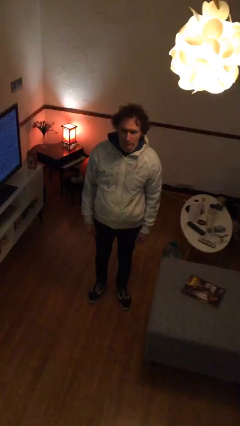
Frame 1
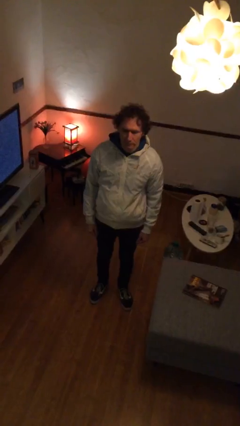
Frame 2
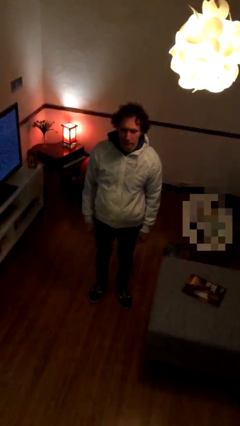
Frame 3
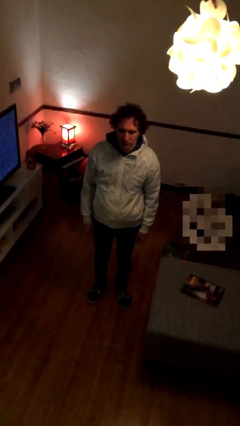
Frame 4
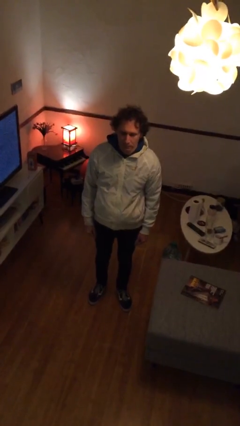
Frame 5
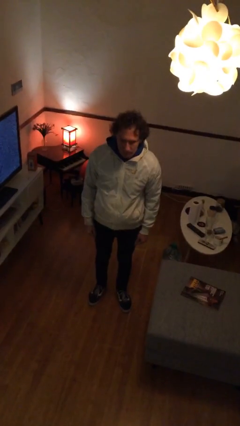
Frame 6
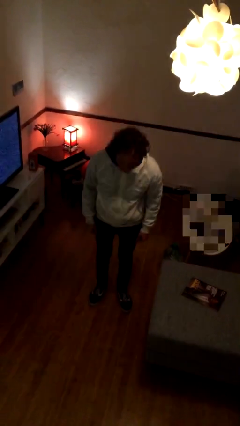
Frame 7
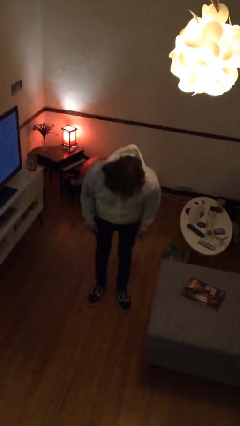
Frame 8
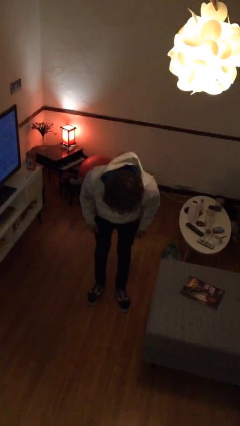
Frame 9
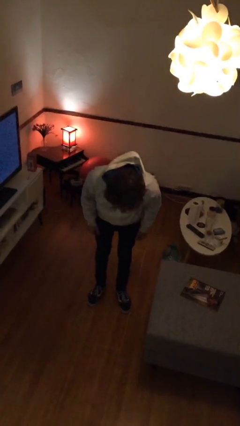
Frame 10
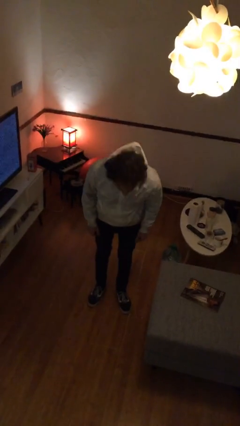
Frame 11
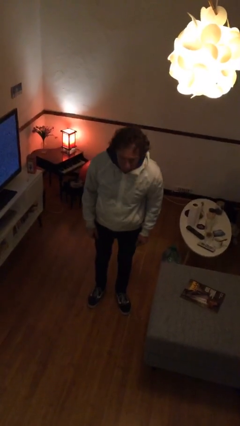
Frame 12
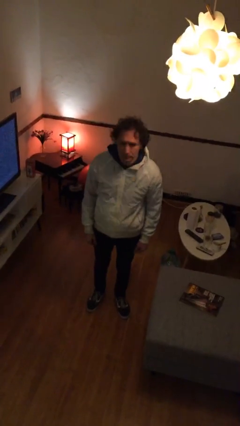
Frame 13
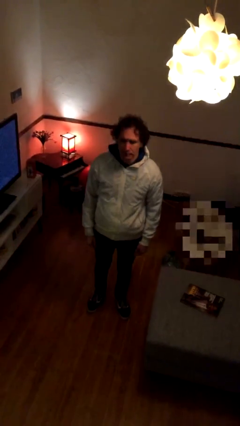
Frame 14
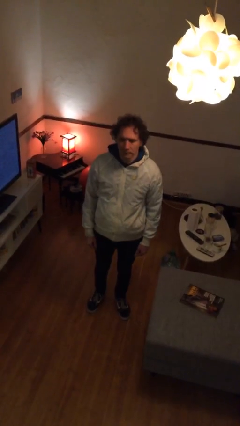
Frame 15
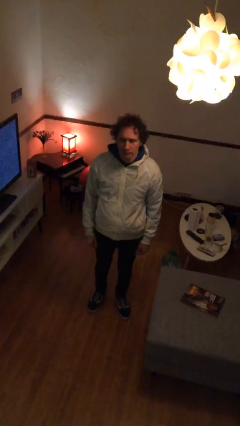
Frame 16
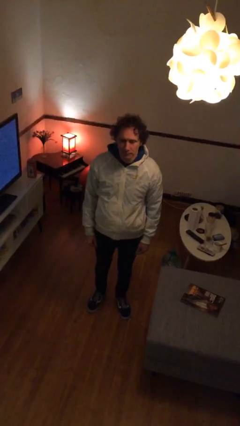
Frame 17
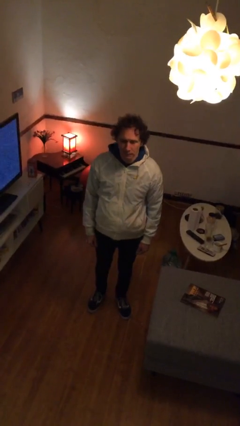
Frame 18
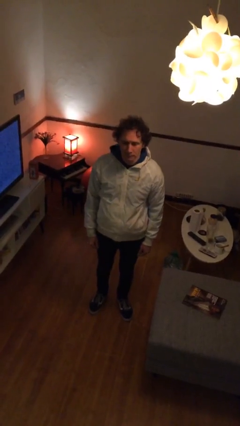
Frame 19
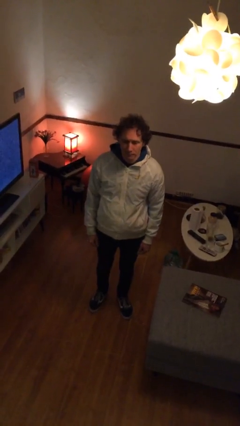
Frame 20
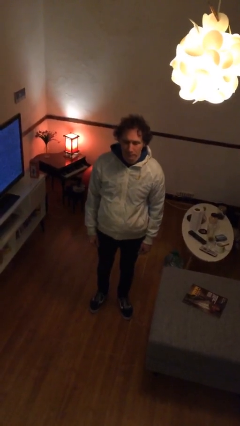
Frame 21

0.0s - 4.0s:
person bows

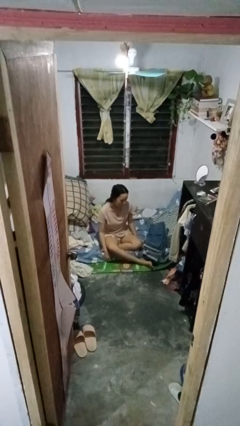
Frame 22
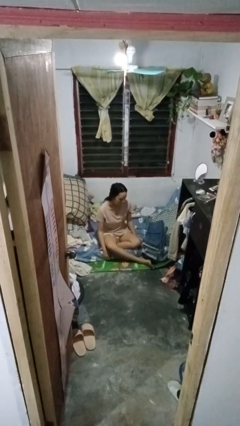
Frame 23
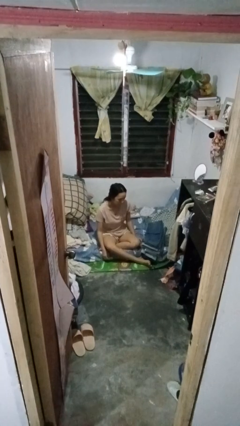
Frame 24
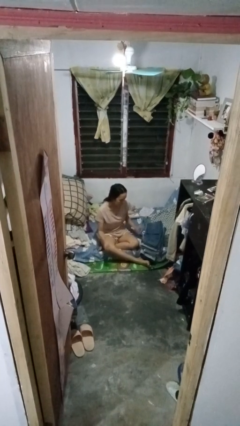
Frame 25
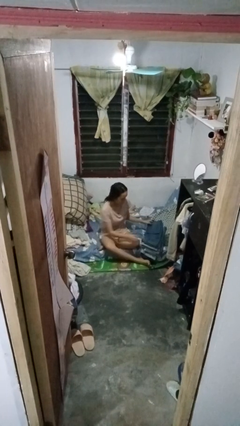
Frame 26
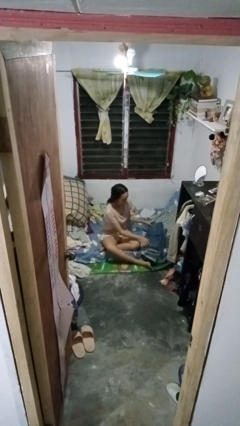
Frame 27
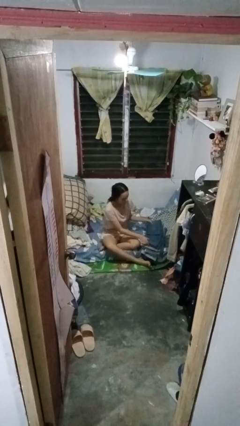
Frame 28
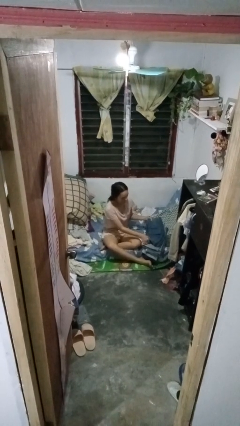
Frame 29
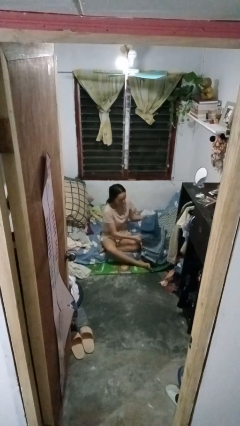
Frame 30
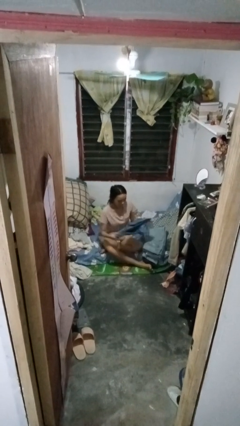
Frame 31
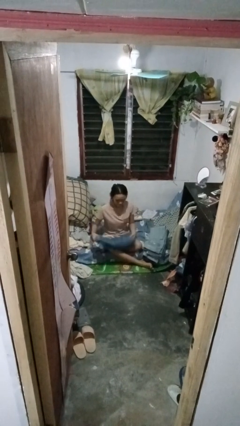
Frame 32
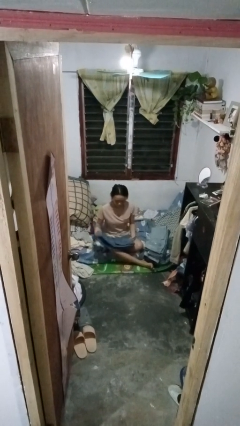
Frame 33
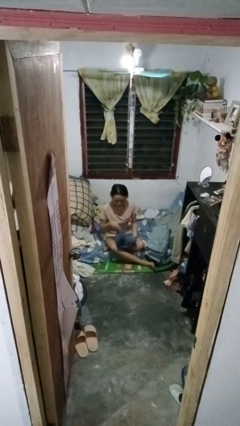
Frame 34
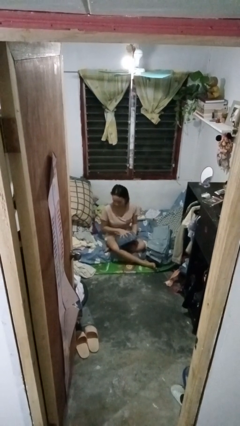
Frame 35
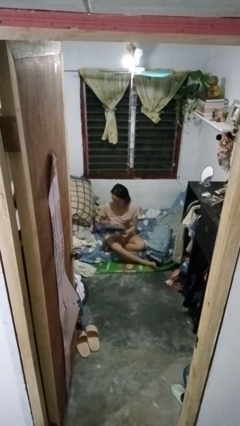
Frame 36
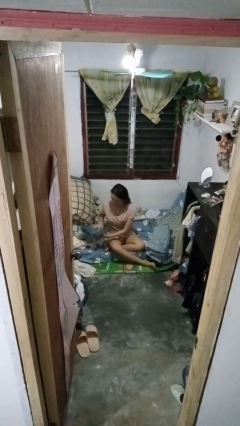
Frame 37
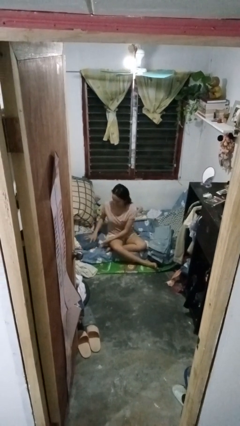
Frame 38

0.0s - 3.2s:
person folds pants

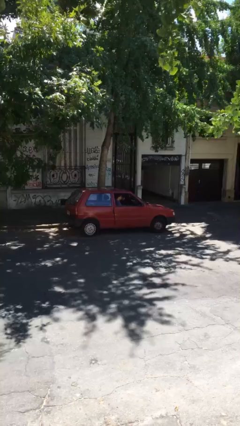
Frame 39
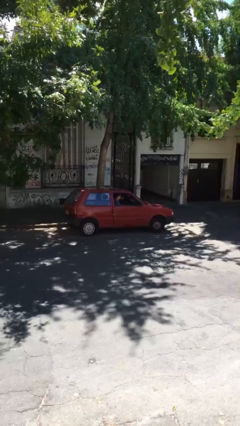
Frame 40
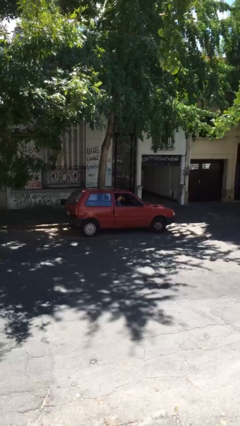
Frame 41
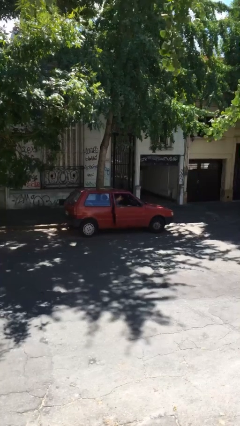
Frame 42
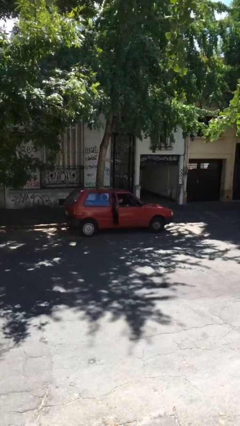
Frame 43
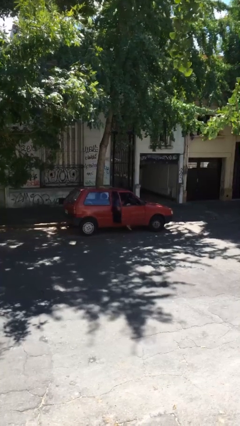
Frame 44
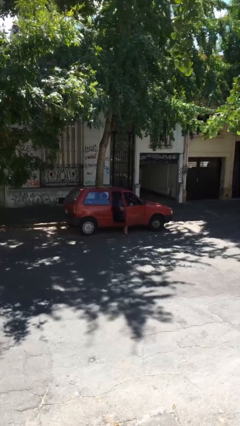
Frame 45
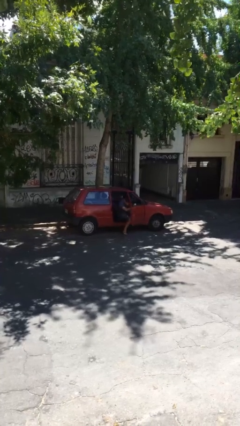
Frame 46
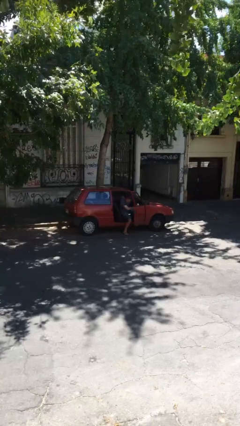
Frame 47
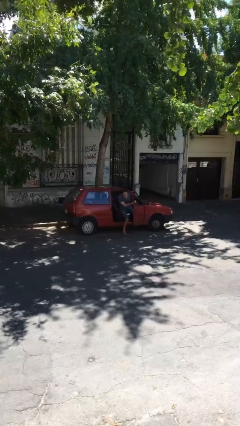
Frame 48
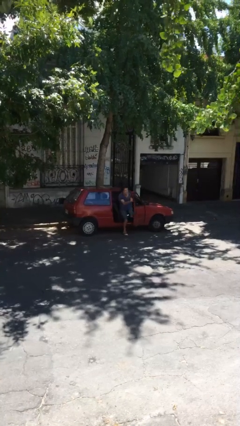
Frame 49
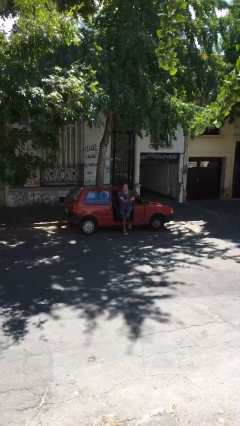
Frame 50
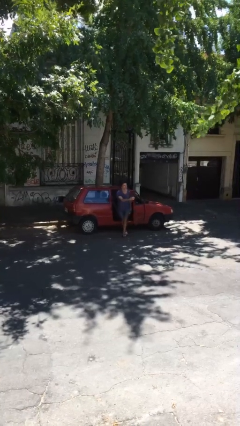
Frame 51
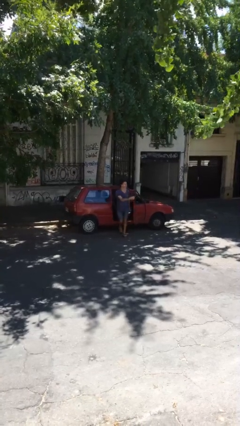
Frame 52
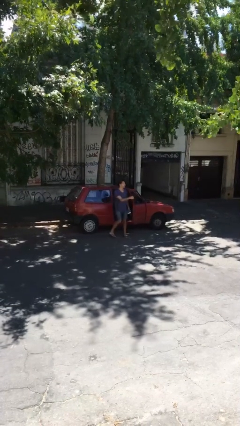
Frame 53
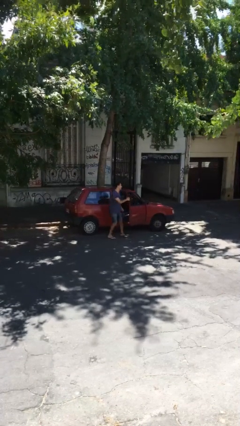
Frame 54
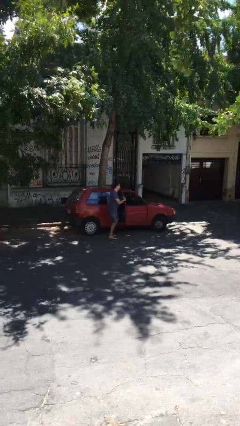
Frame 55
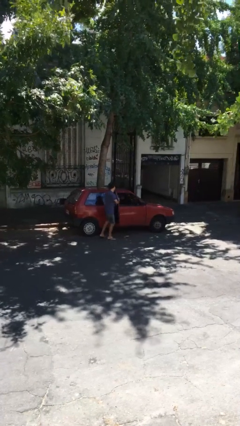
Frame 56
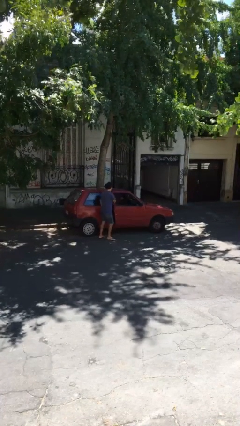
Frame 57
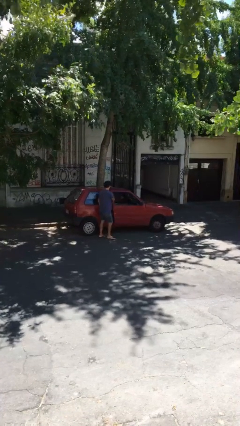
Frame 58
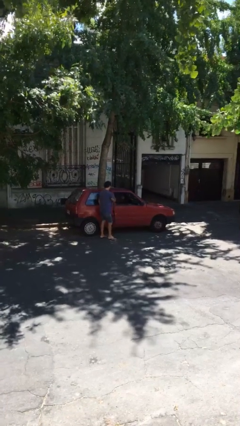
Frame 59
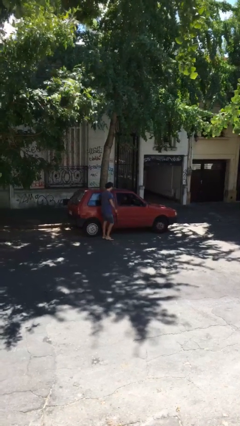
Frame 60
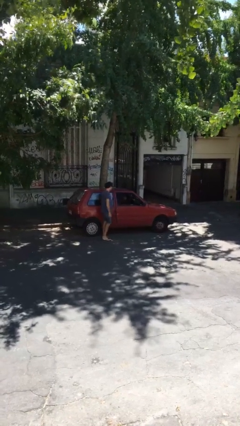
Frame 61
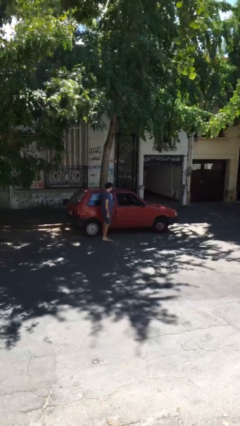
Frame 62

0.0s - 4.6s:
car drops off person

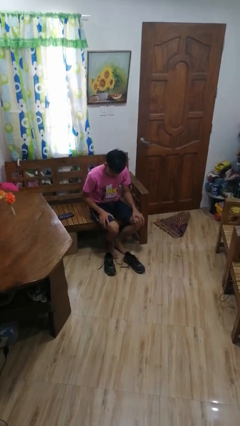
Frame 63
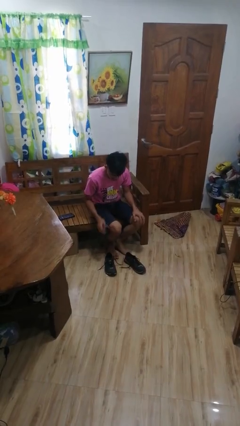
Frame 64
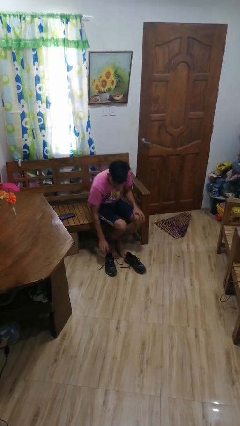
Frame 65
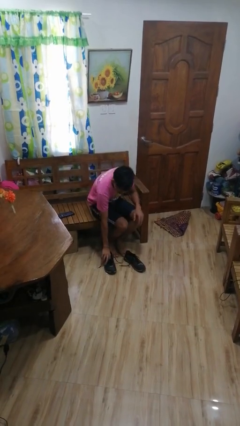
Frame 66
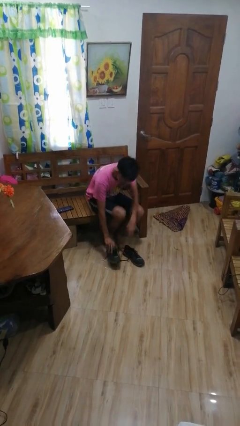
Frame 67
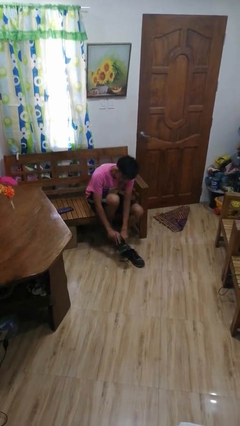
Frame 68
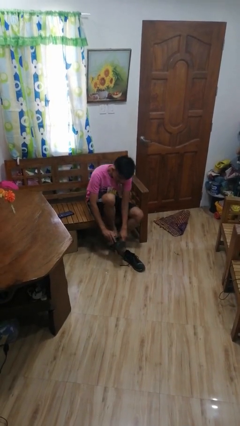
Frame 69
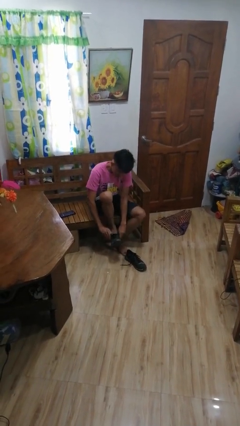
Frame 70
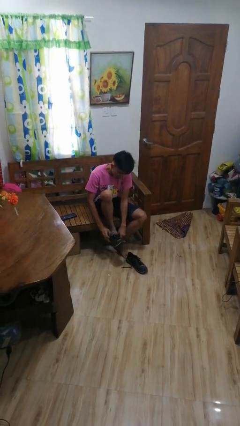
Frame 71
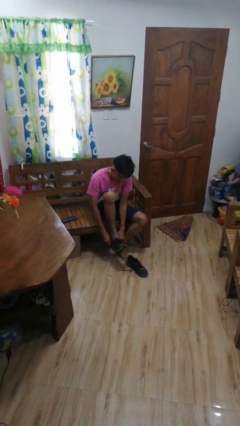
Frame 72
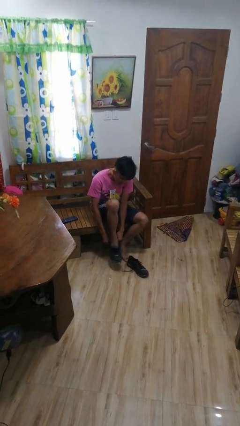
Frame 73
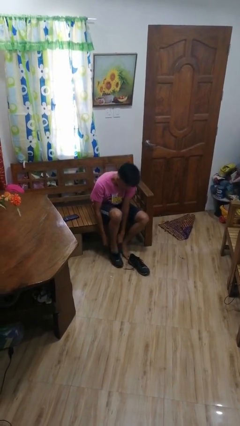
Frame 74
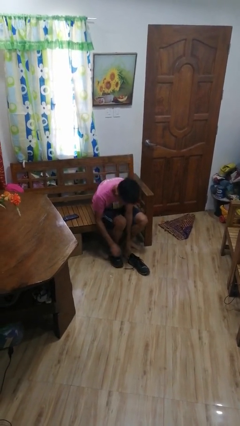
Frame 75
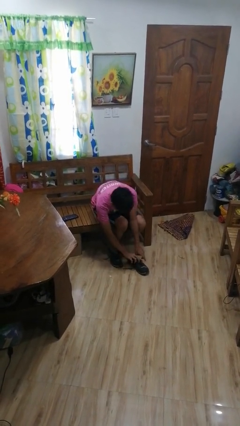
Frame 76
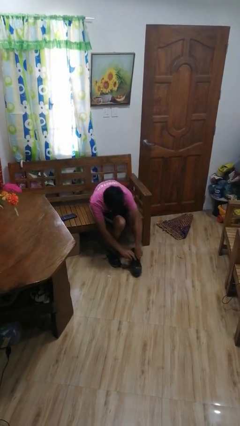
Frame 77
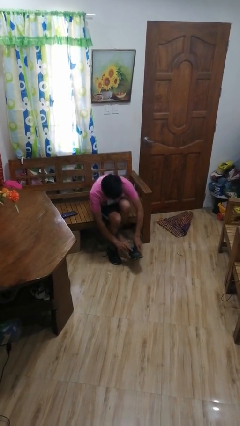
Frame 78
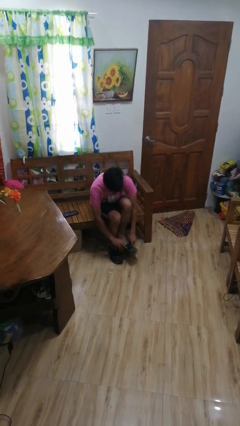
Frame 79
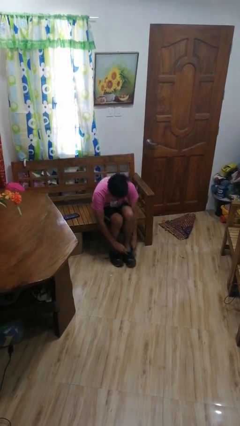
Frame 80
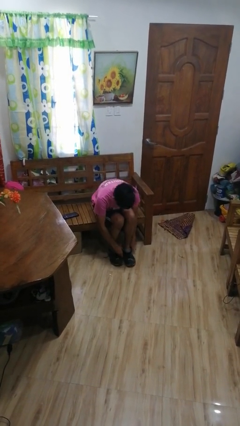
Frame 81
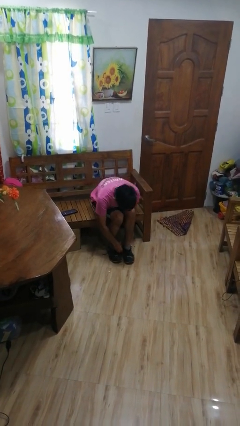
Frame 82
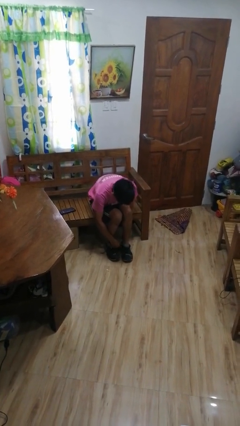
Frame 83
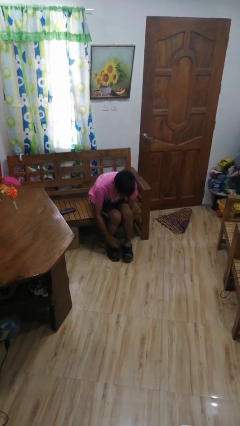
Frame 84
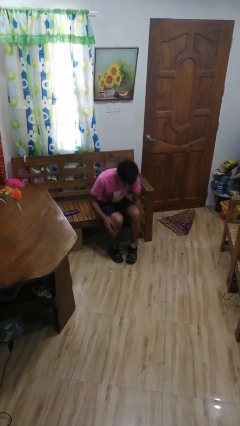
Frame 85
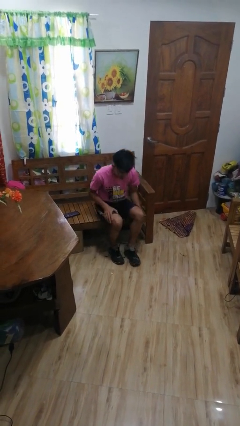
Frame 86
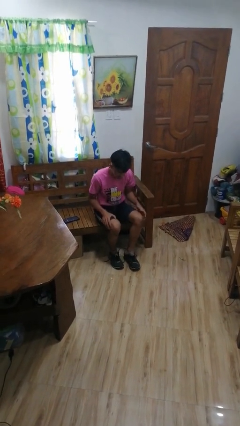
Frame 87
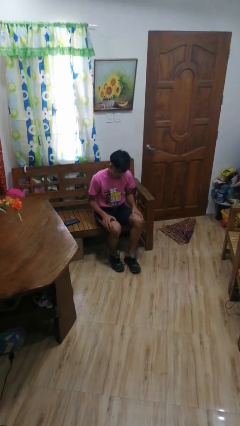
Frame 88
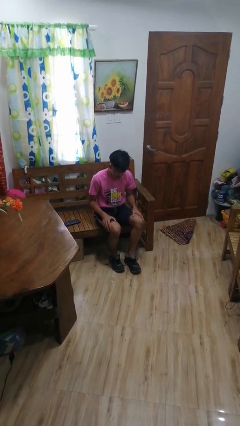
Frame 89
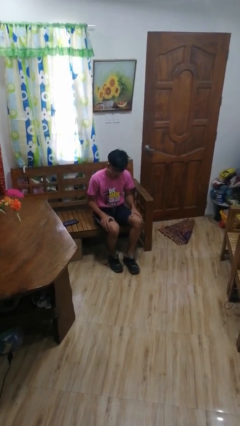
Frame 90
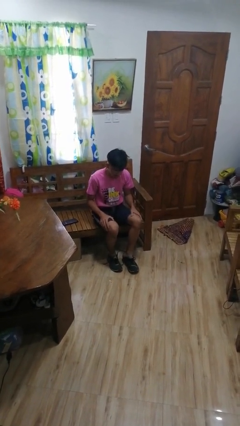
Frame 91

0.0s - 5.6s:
person puts on shoes

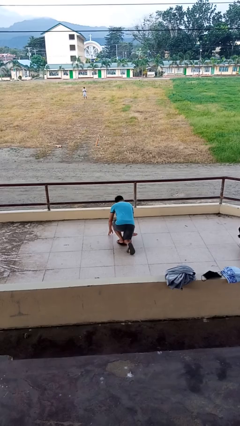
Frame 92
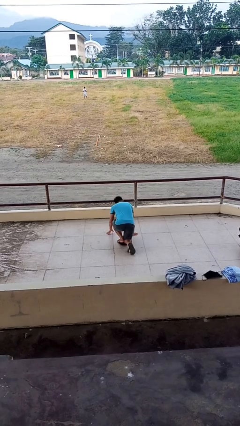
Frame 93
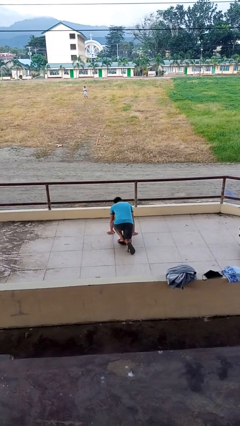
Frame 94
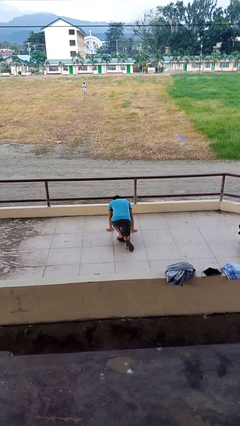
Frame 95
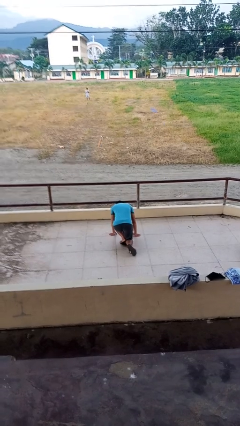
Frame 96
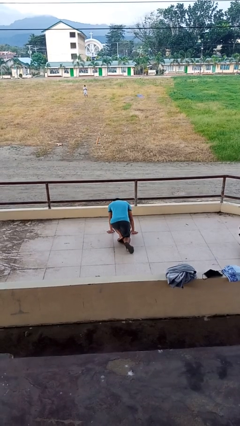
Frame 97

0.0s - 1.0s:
person lies down on floor
